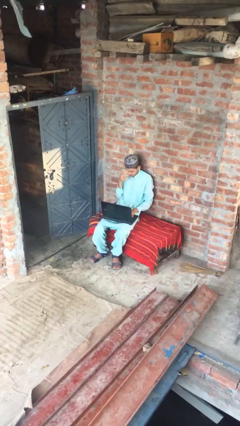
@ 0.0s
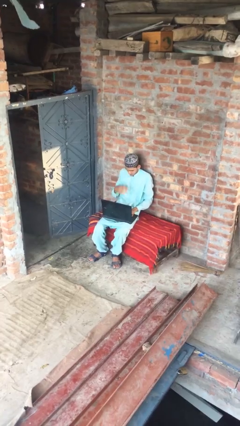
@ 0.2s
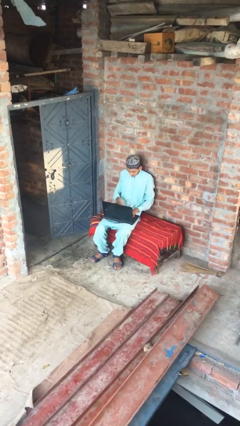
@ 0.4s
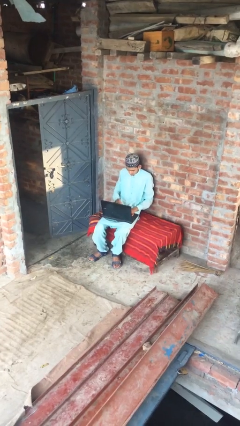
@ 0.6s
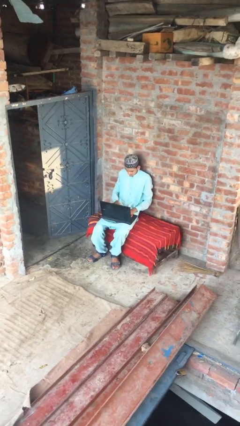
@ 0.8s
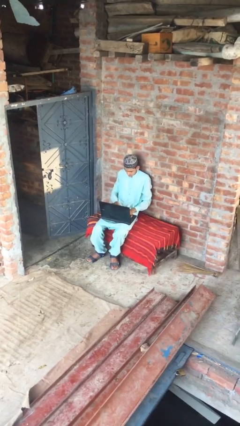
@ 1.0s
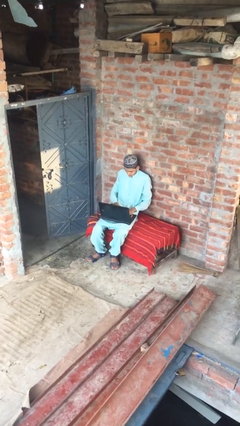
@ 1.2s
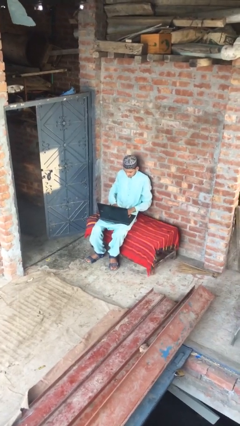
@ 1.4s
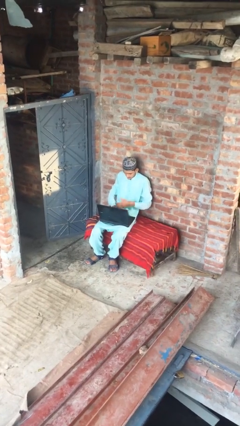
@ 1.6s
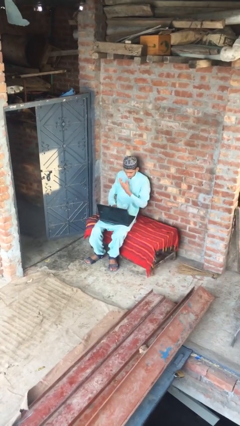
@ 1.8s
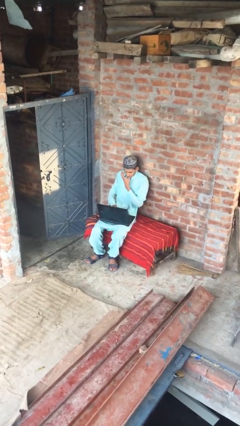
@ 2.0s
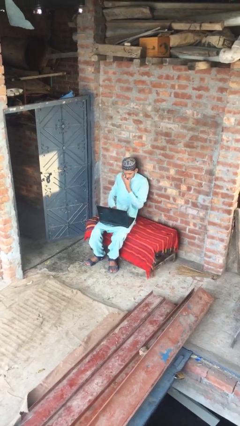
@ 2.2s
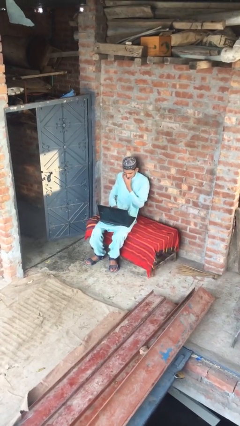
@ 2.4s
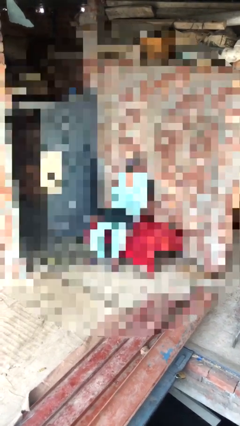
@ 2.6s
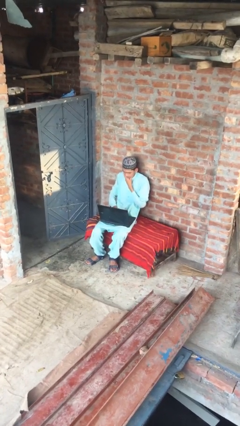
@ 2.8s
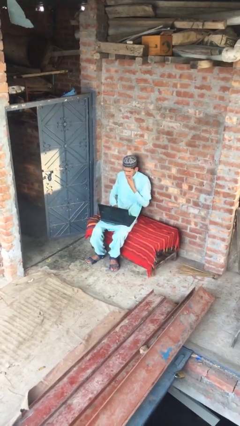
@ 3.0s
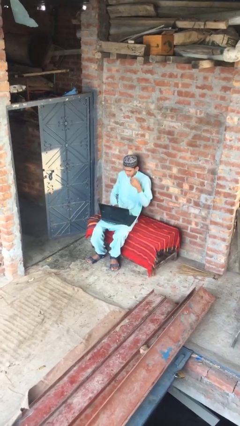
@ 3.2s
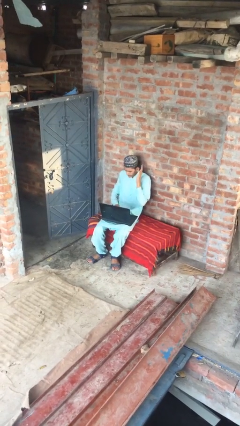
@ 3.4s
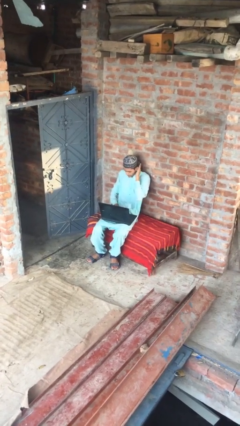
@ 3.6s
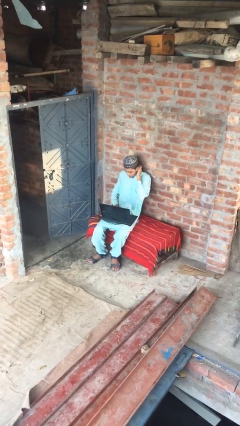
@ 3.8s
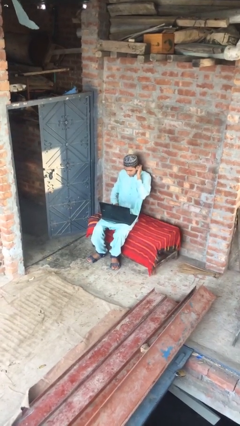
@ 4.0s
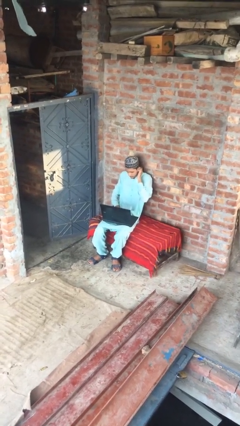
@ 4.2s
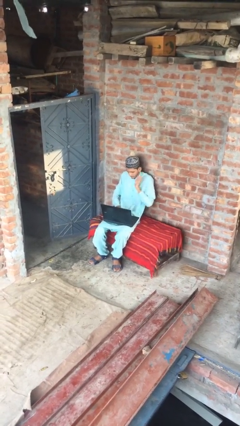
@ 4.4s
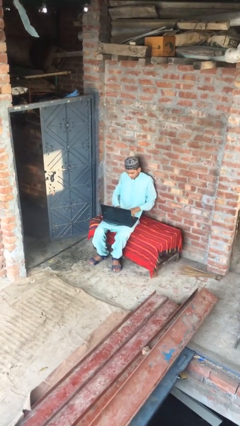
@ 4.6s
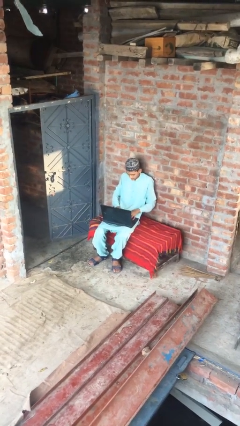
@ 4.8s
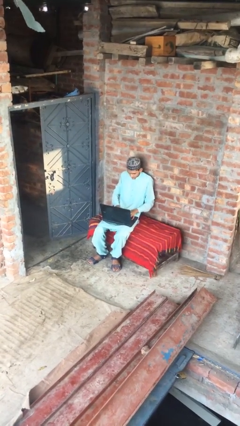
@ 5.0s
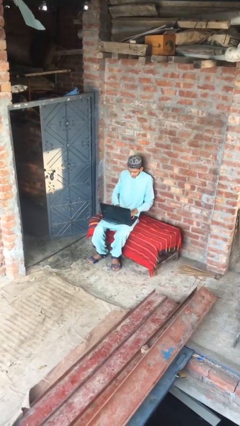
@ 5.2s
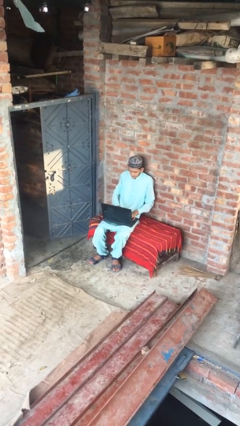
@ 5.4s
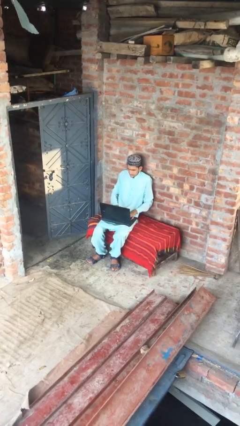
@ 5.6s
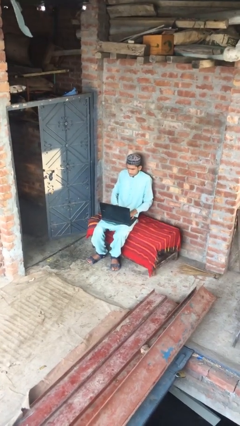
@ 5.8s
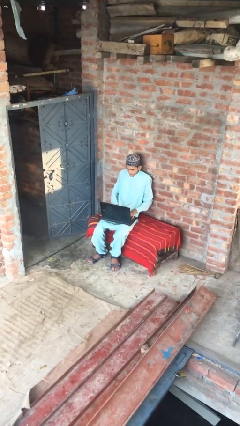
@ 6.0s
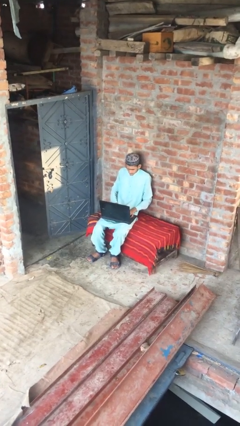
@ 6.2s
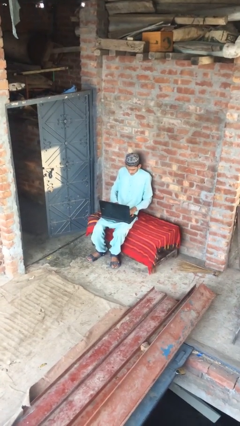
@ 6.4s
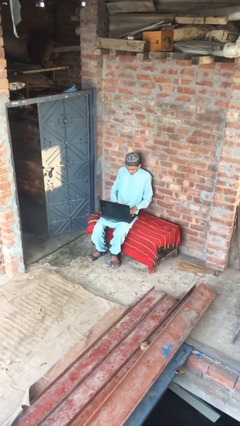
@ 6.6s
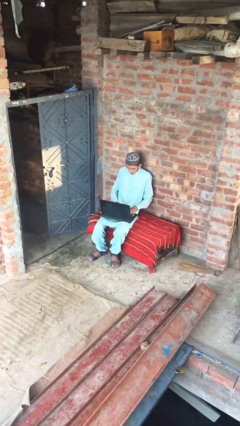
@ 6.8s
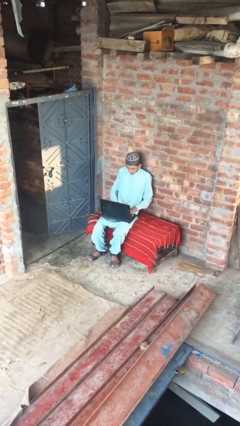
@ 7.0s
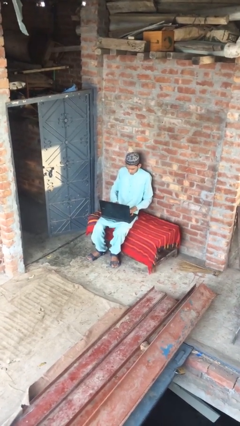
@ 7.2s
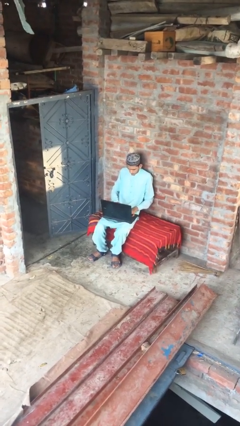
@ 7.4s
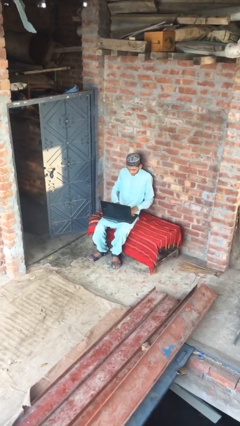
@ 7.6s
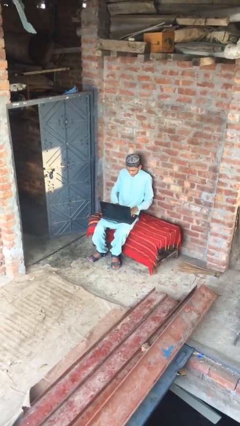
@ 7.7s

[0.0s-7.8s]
person interacts with laptop

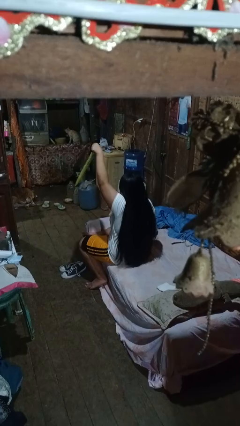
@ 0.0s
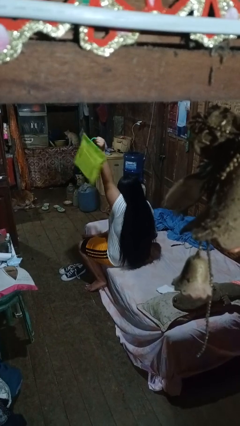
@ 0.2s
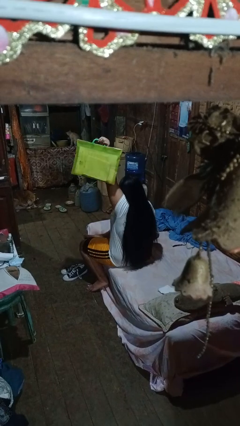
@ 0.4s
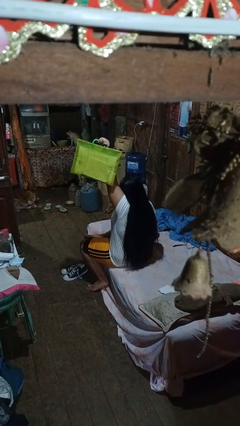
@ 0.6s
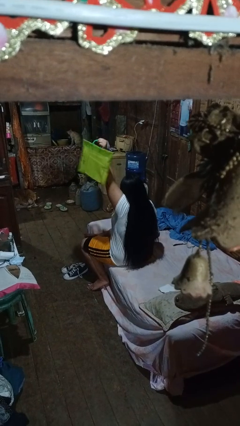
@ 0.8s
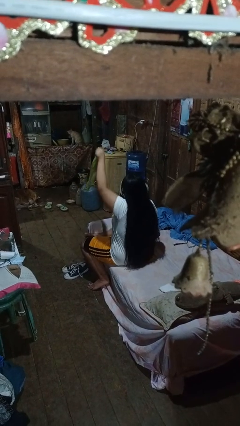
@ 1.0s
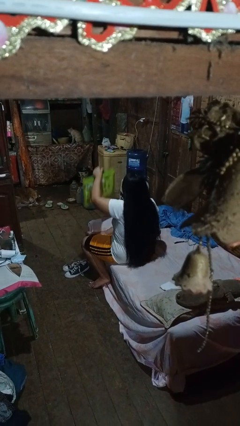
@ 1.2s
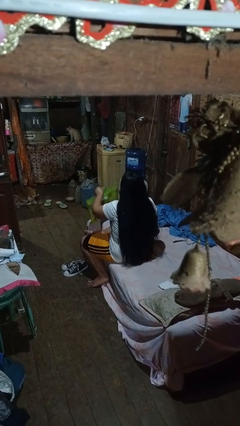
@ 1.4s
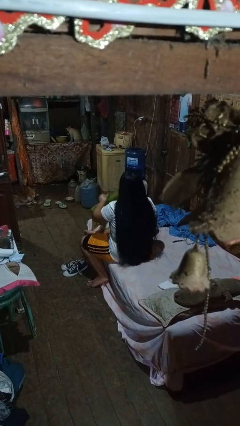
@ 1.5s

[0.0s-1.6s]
person holds object above head

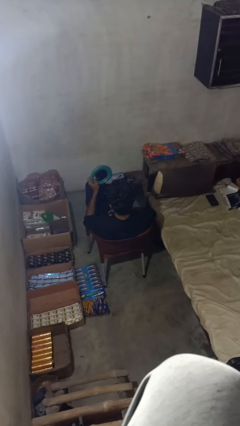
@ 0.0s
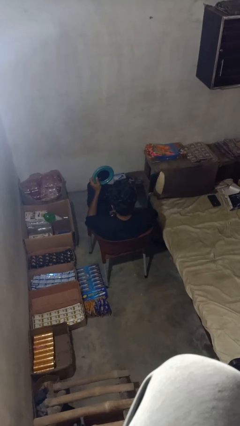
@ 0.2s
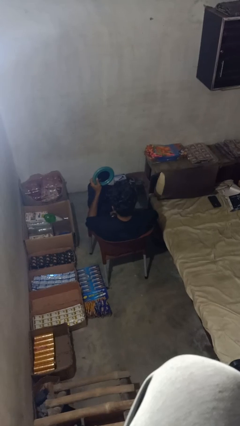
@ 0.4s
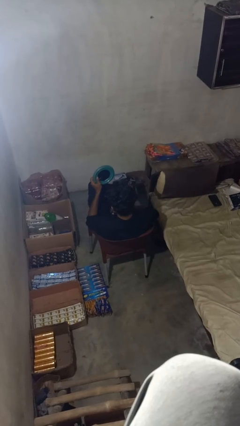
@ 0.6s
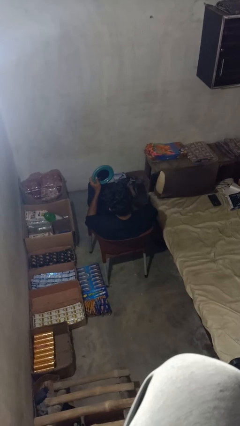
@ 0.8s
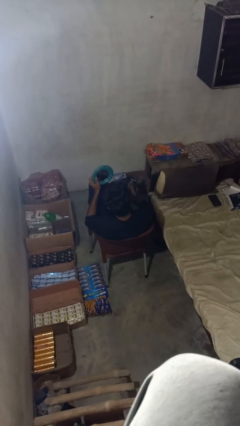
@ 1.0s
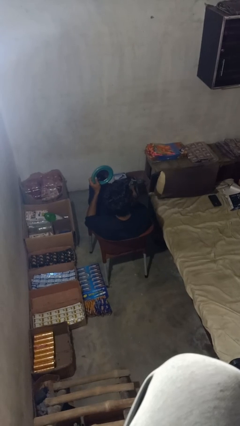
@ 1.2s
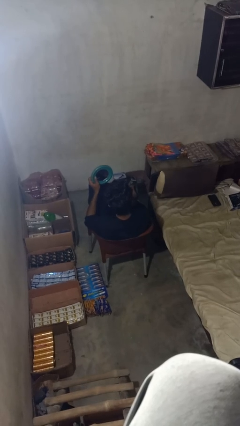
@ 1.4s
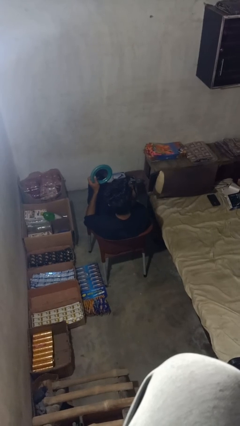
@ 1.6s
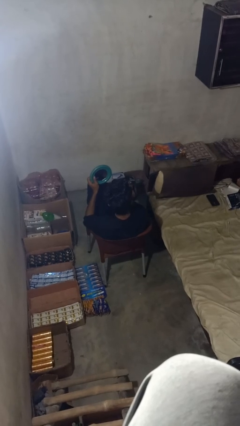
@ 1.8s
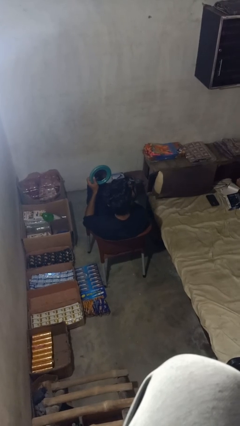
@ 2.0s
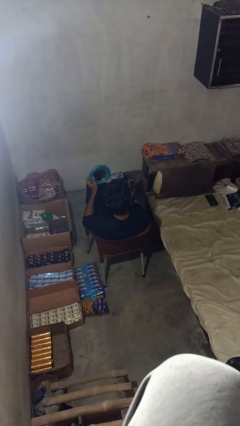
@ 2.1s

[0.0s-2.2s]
person applies eye makeup

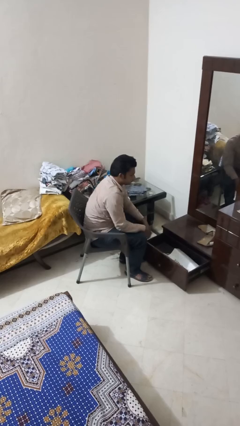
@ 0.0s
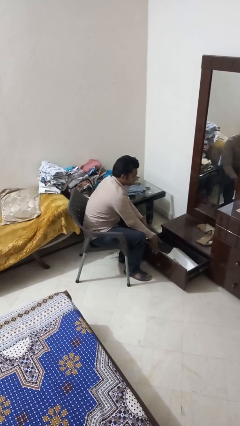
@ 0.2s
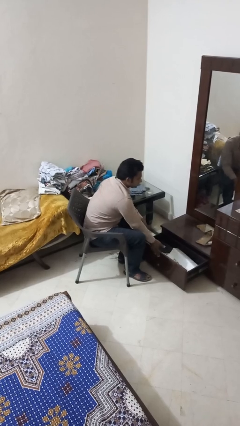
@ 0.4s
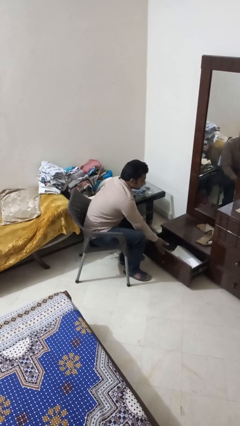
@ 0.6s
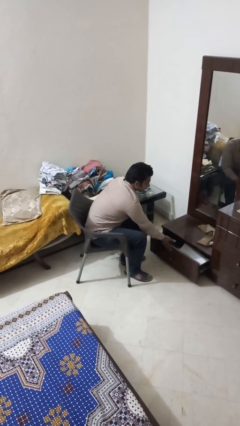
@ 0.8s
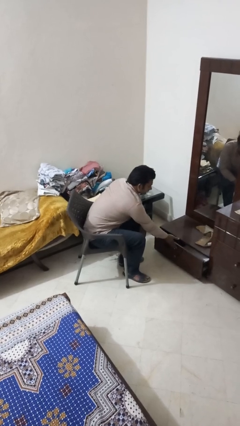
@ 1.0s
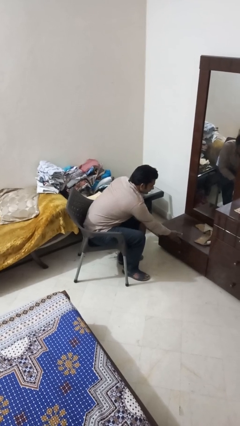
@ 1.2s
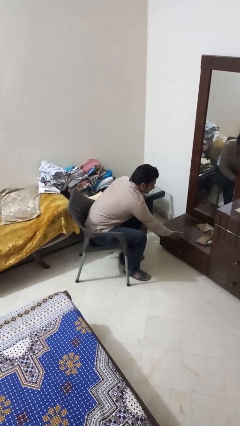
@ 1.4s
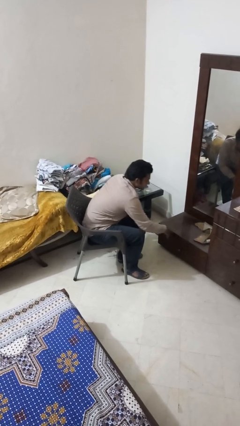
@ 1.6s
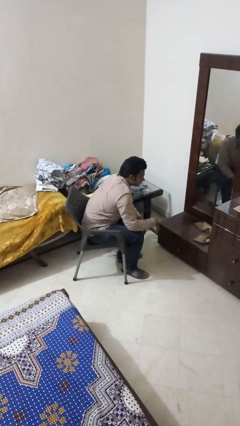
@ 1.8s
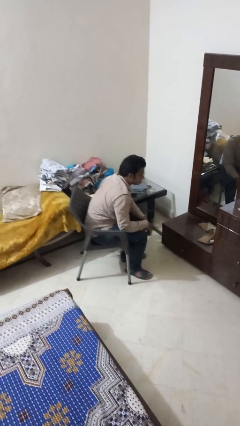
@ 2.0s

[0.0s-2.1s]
person closes dresser drawer

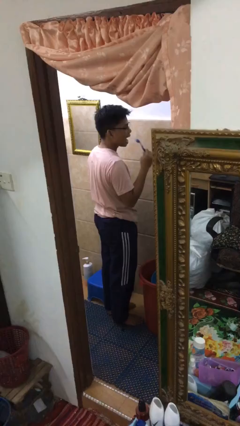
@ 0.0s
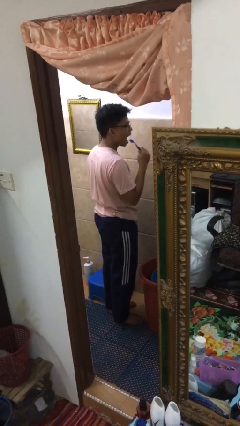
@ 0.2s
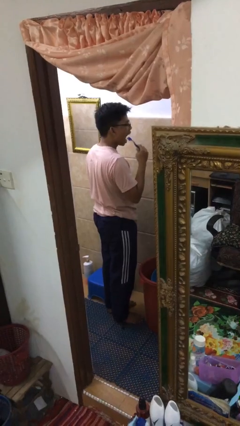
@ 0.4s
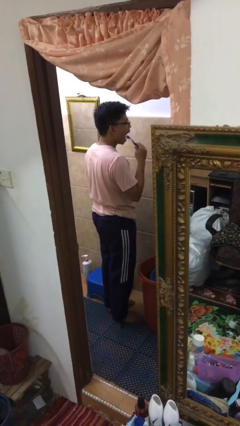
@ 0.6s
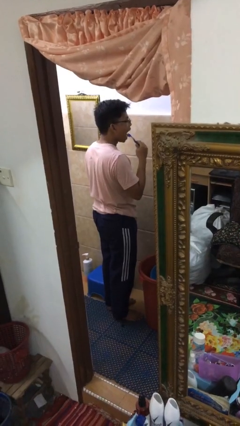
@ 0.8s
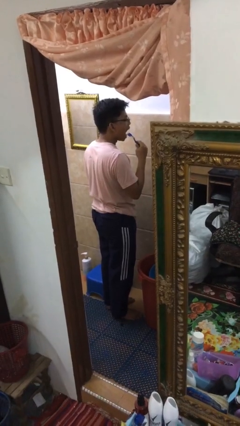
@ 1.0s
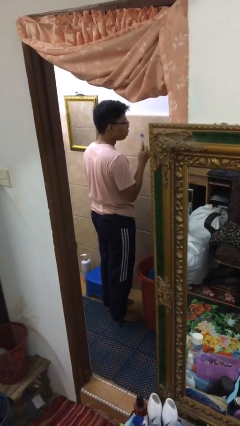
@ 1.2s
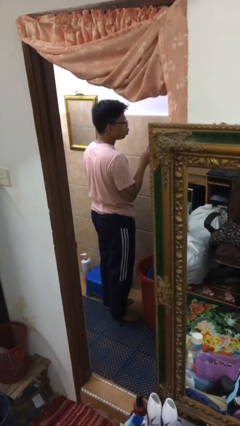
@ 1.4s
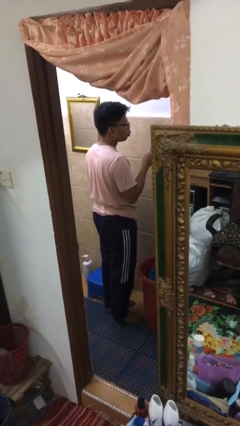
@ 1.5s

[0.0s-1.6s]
person brushes teeth

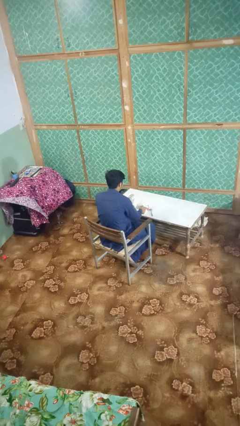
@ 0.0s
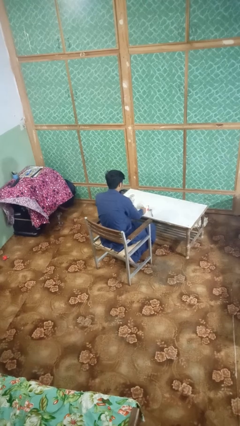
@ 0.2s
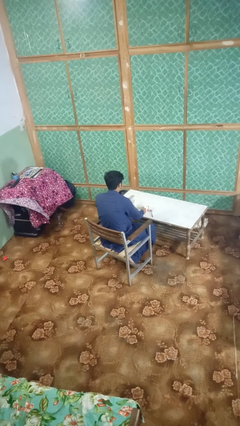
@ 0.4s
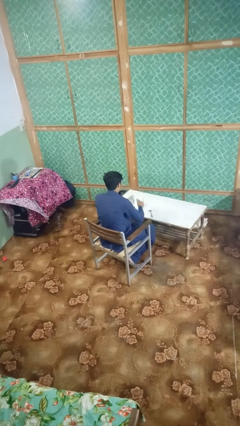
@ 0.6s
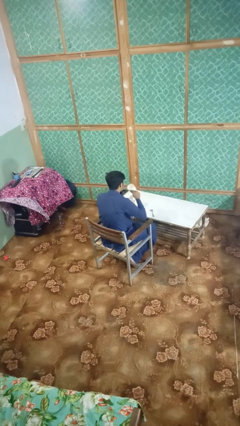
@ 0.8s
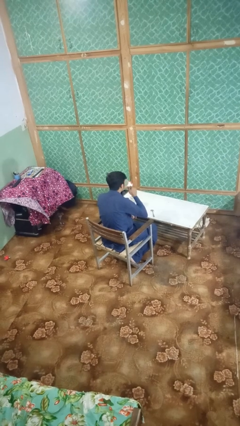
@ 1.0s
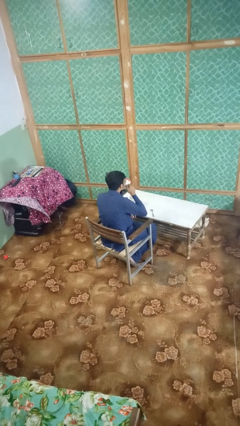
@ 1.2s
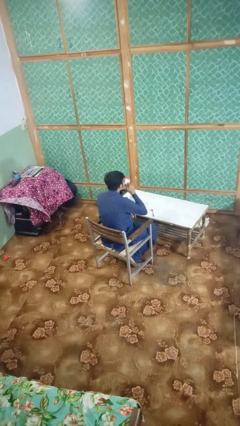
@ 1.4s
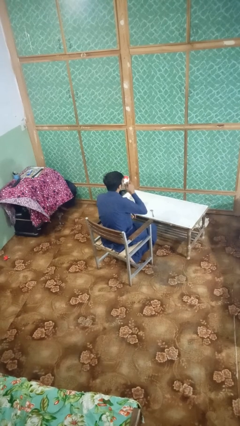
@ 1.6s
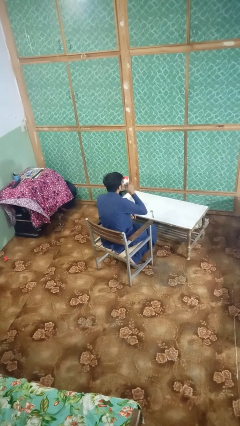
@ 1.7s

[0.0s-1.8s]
person drinks from mug

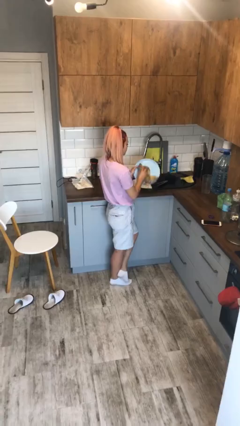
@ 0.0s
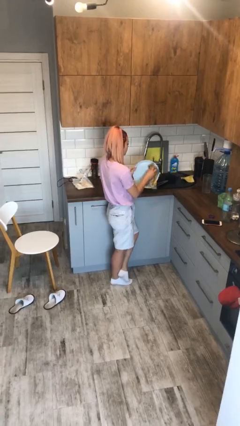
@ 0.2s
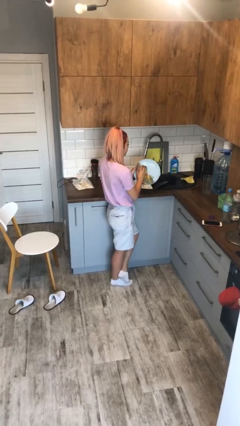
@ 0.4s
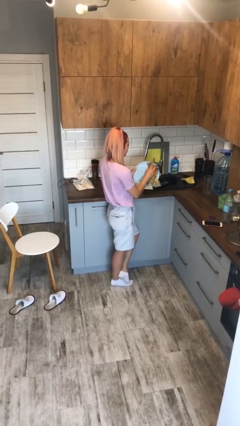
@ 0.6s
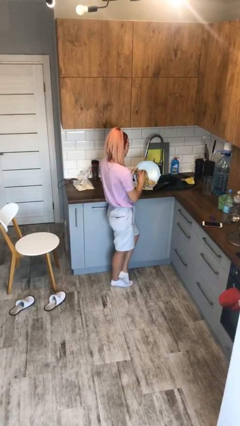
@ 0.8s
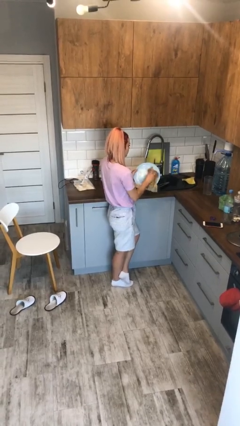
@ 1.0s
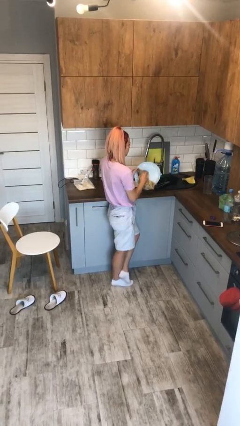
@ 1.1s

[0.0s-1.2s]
person dries dish
